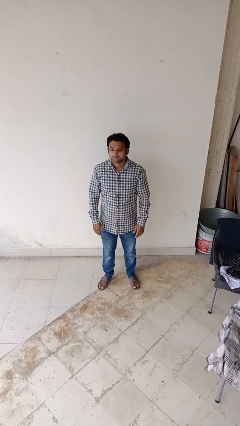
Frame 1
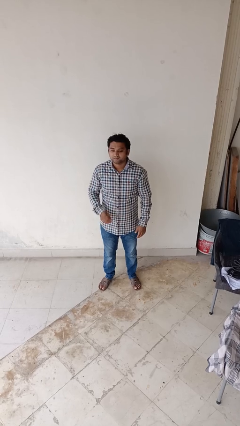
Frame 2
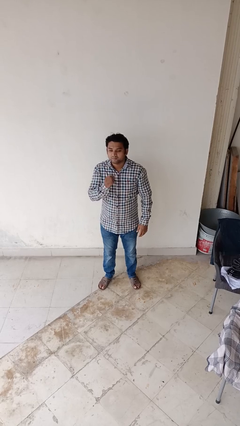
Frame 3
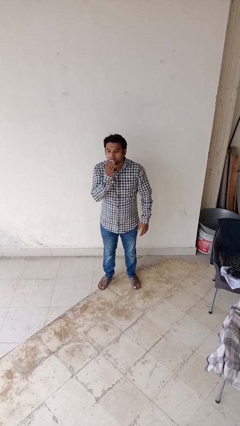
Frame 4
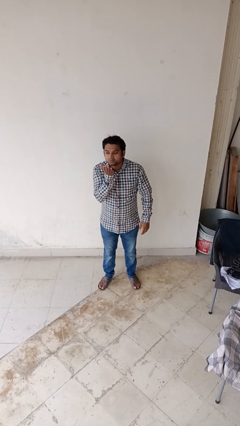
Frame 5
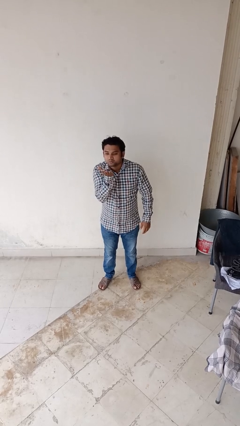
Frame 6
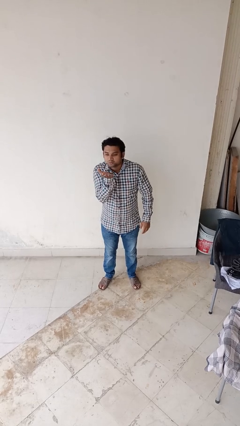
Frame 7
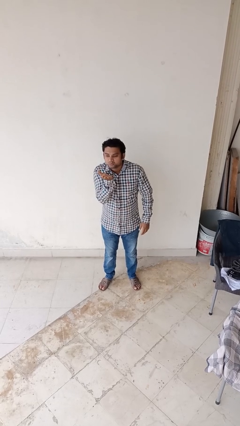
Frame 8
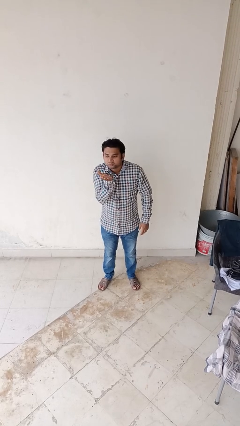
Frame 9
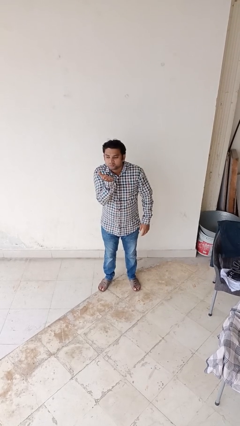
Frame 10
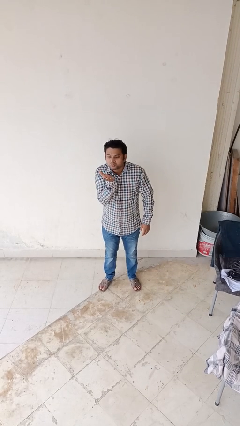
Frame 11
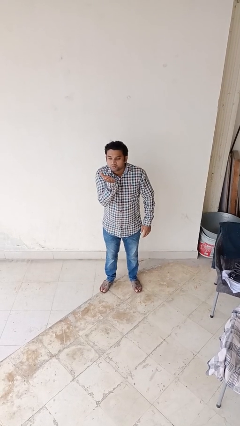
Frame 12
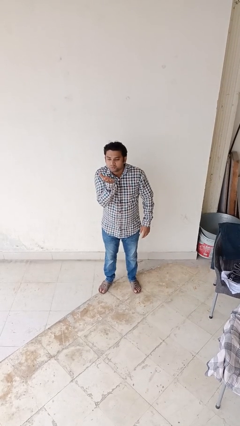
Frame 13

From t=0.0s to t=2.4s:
person gestures blow kiss

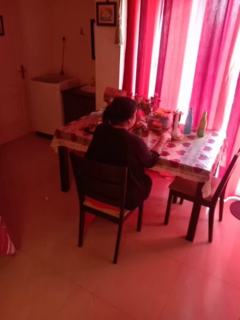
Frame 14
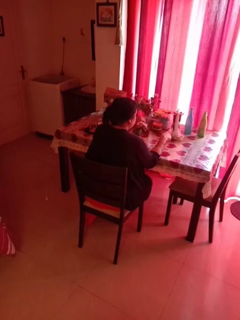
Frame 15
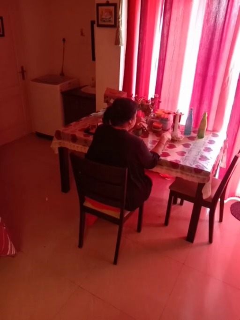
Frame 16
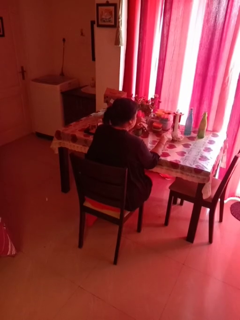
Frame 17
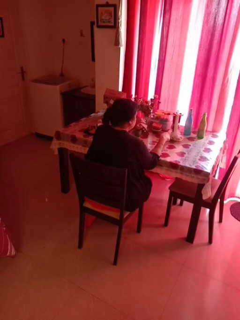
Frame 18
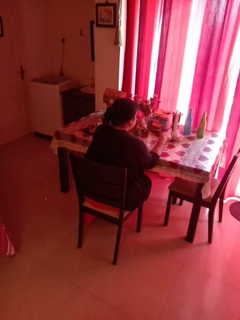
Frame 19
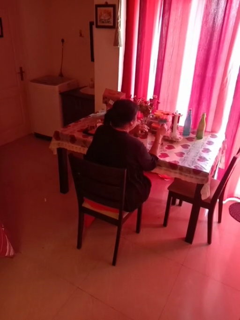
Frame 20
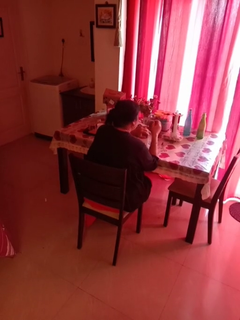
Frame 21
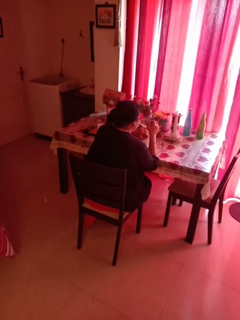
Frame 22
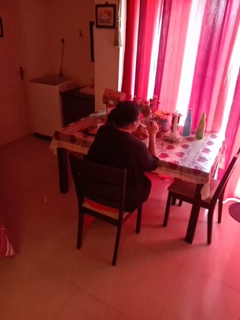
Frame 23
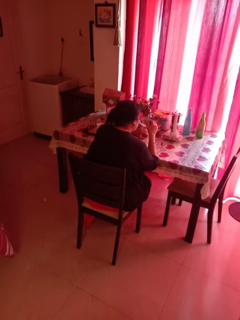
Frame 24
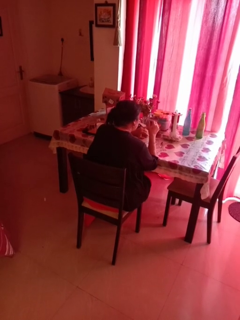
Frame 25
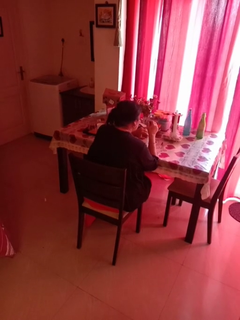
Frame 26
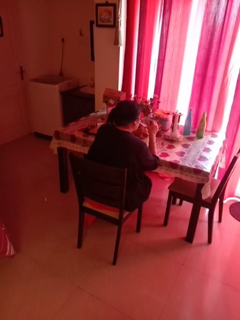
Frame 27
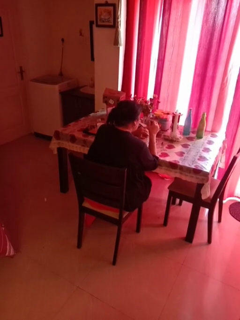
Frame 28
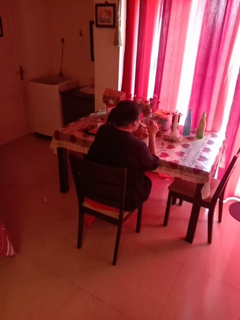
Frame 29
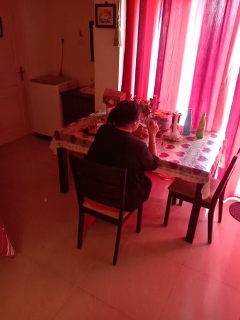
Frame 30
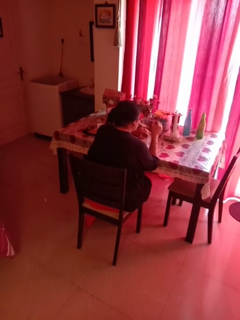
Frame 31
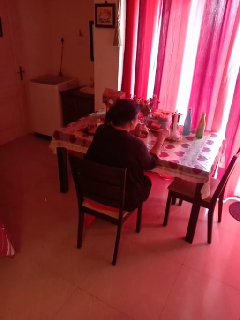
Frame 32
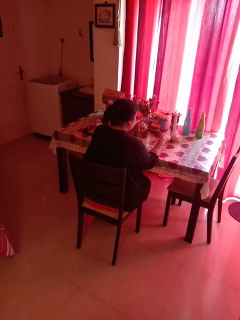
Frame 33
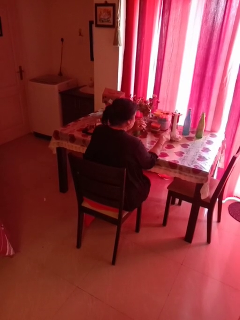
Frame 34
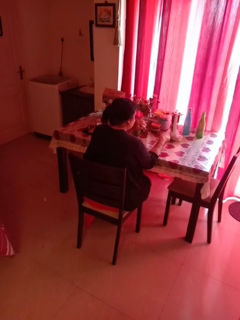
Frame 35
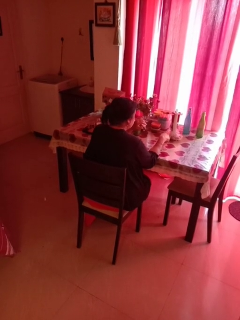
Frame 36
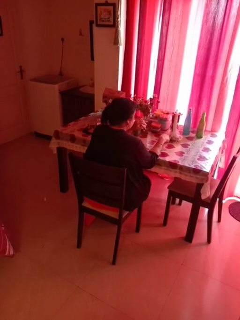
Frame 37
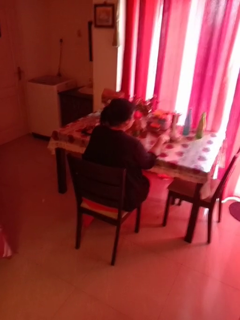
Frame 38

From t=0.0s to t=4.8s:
person paints fingernails

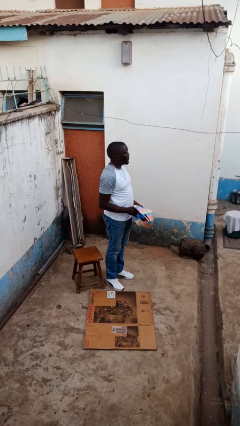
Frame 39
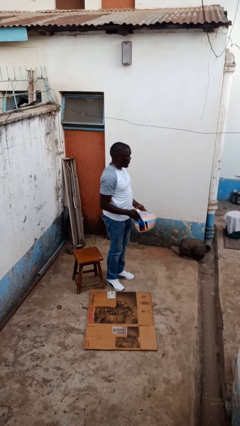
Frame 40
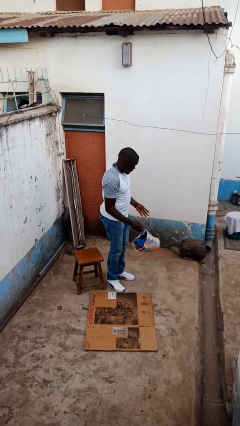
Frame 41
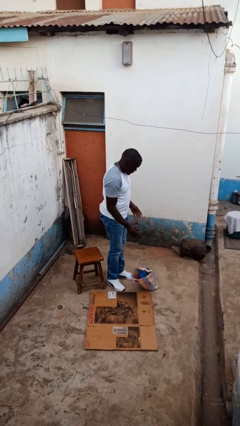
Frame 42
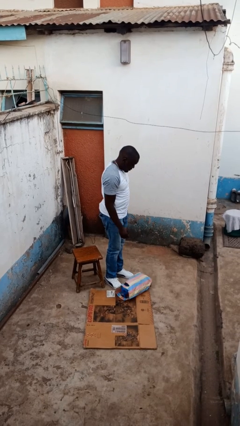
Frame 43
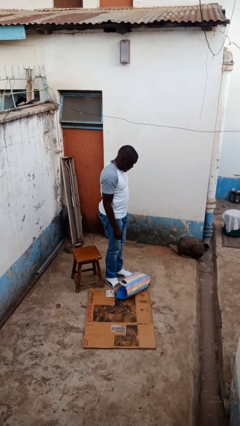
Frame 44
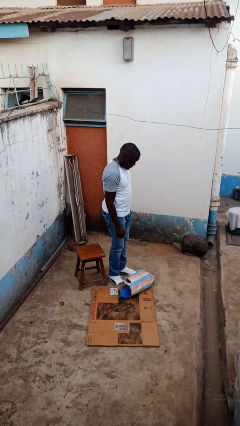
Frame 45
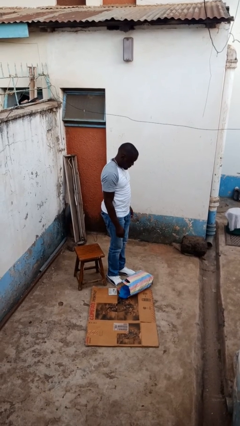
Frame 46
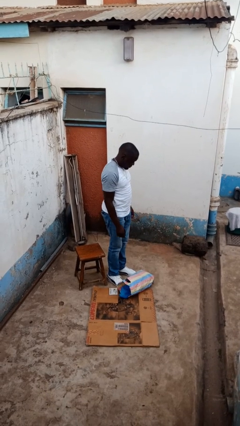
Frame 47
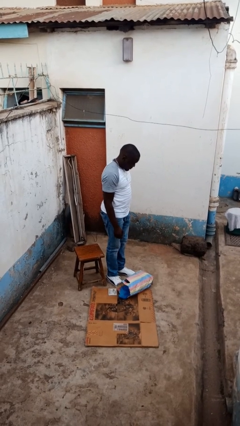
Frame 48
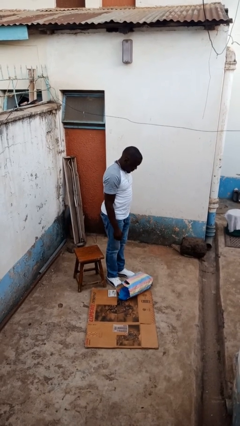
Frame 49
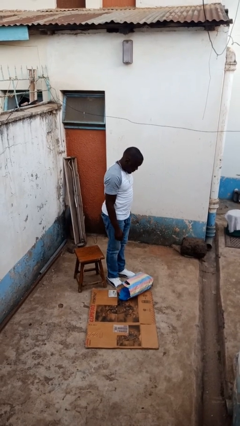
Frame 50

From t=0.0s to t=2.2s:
person drops object

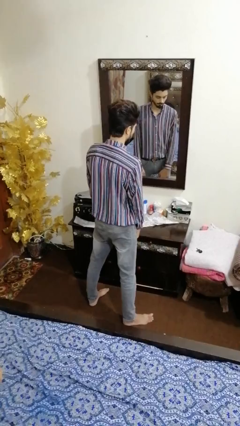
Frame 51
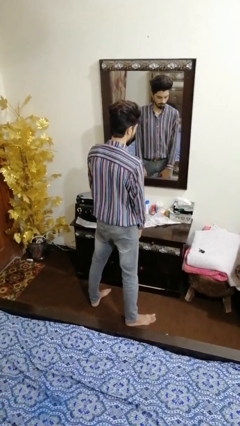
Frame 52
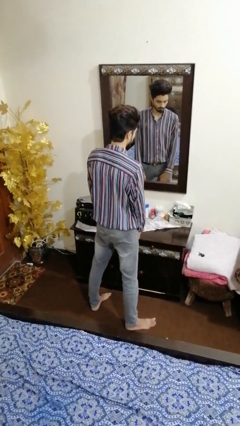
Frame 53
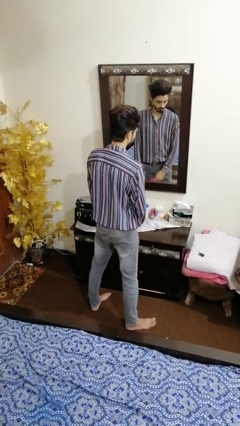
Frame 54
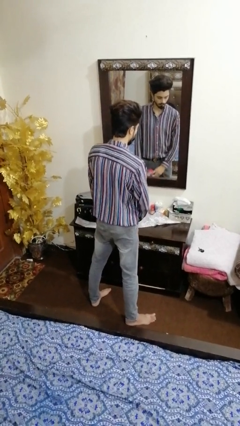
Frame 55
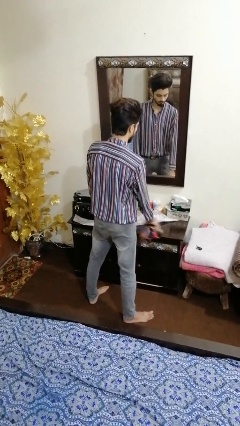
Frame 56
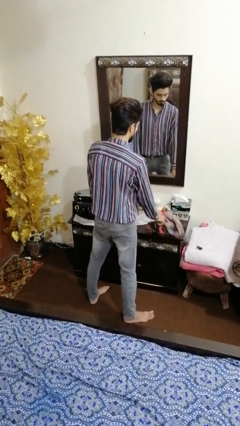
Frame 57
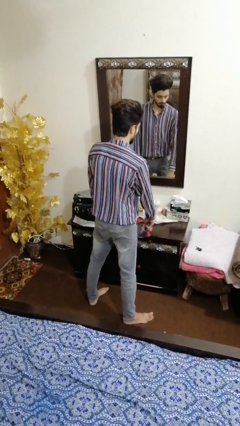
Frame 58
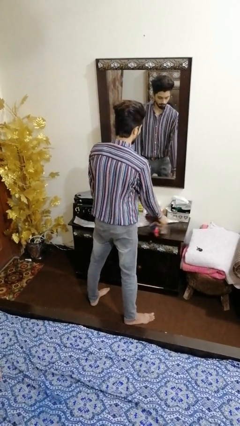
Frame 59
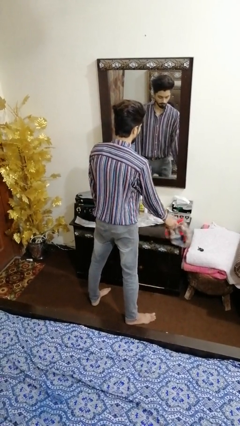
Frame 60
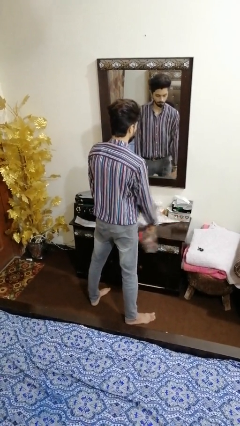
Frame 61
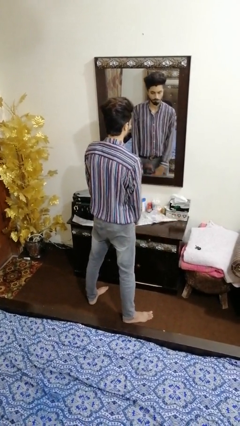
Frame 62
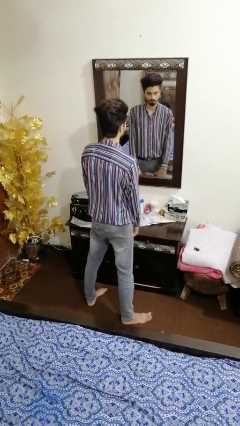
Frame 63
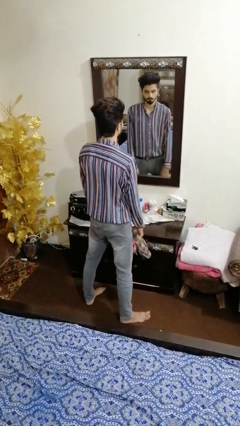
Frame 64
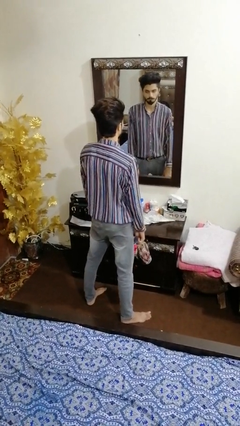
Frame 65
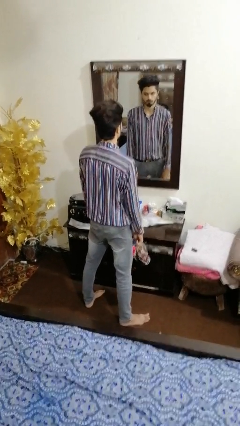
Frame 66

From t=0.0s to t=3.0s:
person cleans table with rag

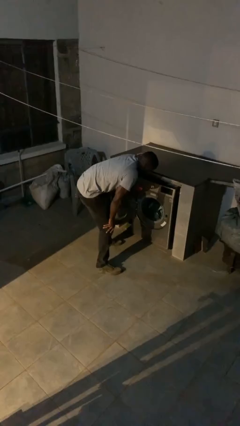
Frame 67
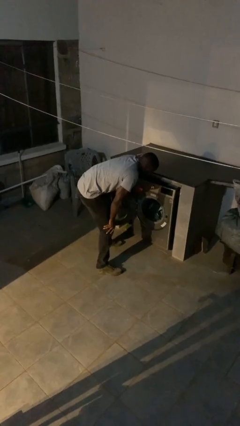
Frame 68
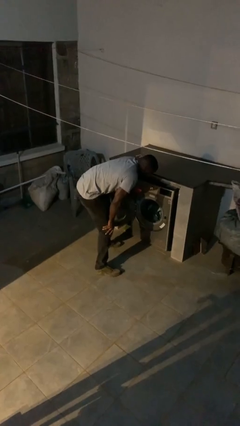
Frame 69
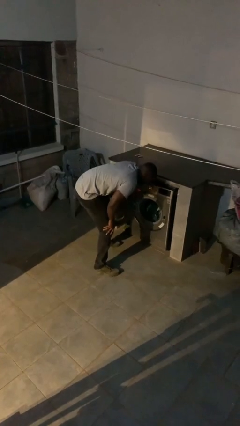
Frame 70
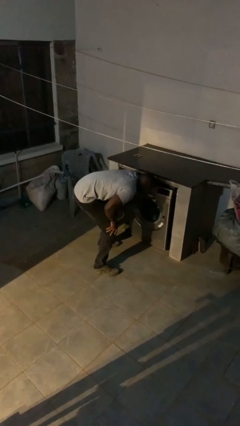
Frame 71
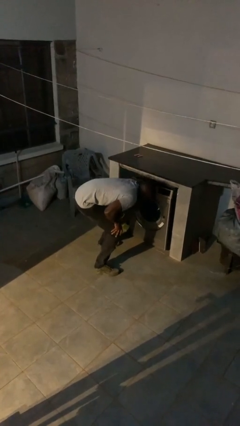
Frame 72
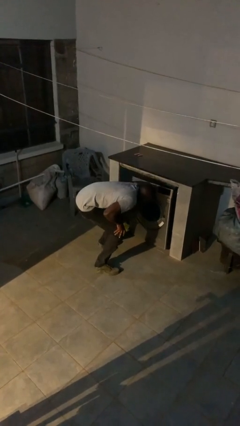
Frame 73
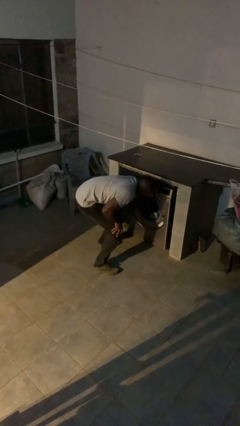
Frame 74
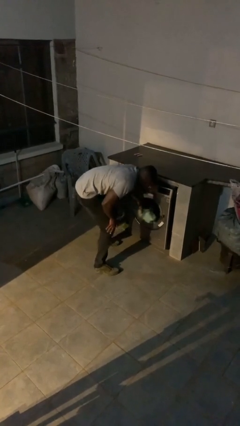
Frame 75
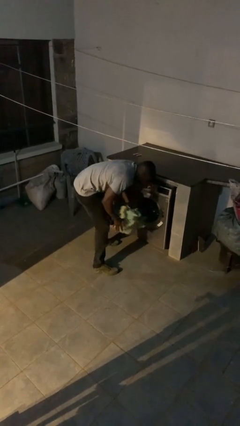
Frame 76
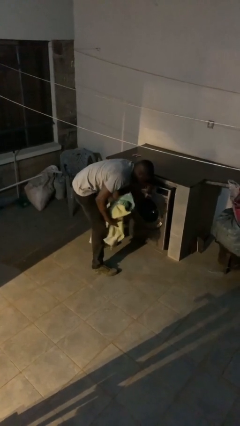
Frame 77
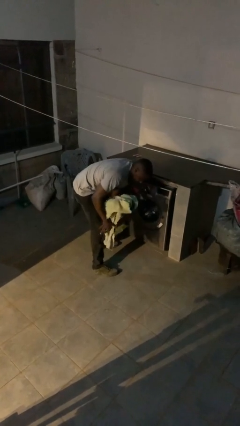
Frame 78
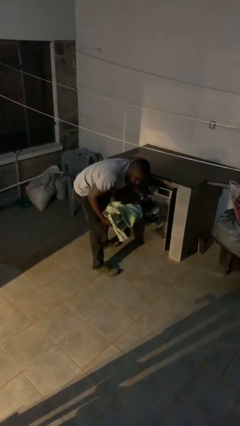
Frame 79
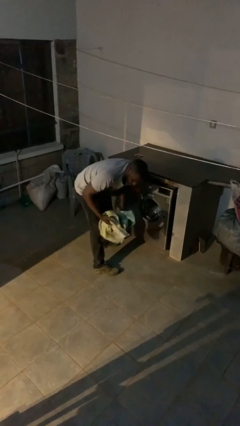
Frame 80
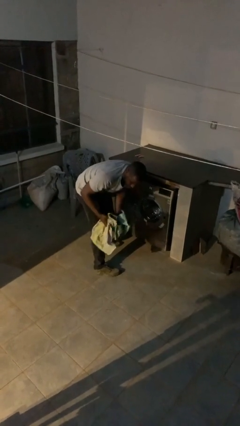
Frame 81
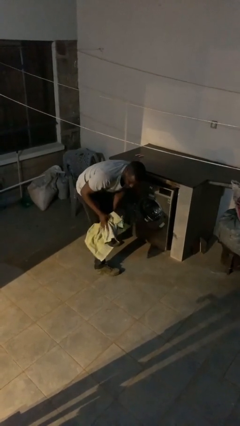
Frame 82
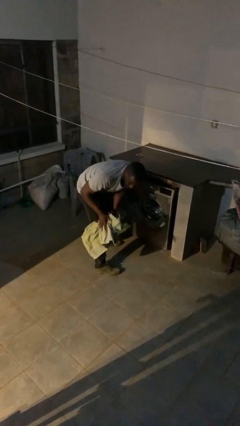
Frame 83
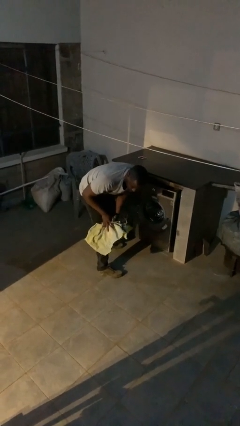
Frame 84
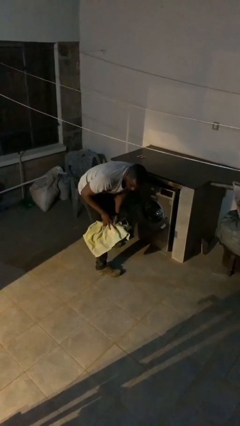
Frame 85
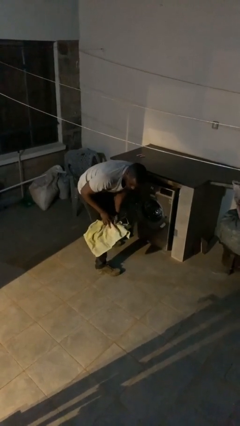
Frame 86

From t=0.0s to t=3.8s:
person unloads clotheswasher

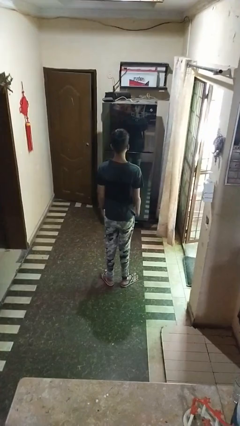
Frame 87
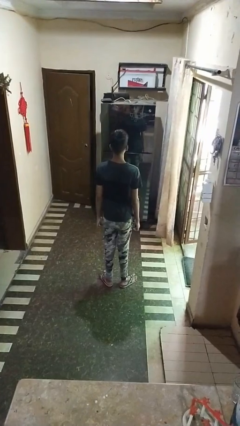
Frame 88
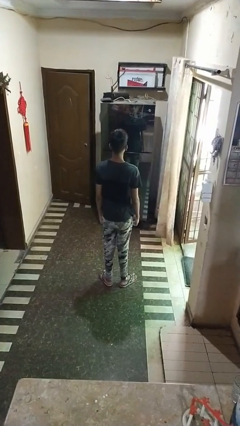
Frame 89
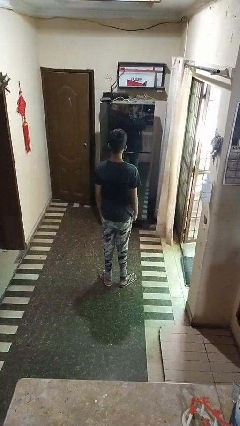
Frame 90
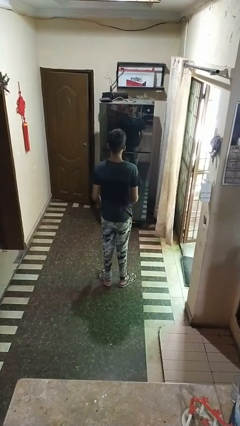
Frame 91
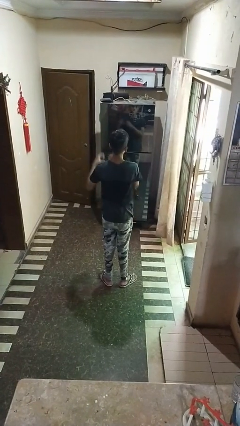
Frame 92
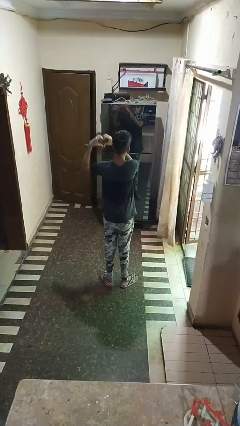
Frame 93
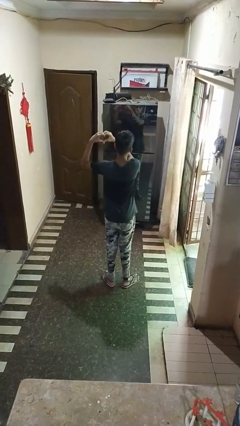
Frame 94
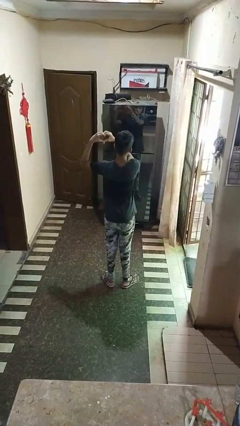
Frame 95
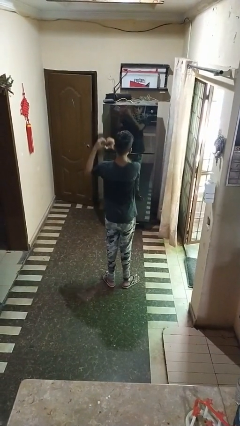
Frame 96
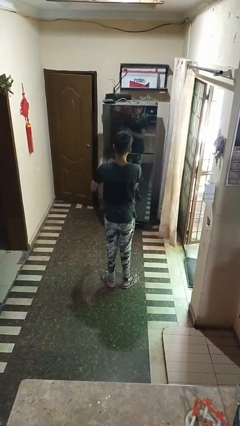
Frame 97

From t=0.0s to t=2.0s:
person gestures heart
